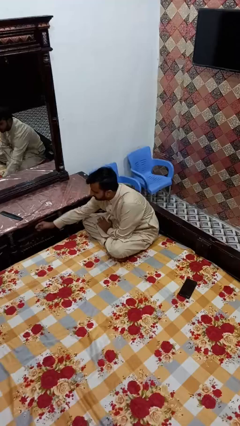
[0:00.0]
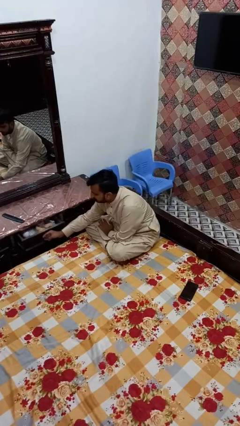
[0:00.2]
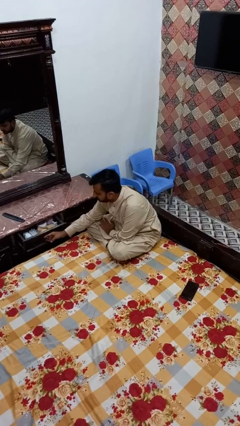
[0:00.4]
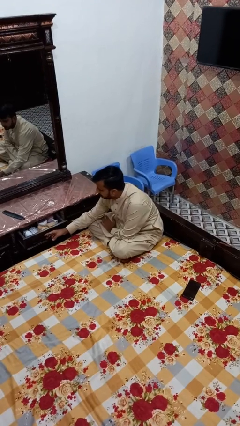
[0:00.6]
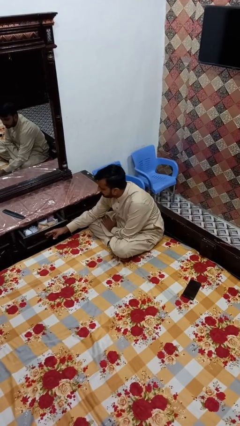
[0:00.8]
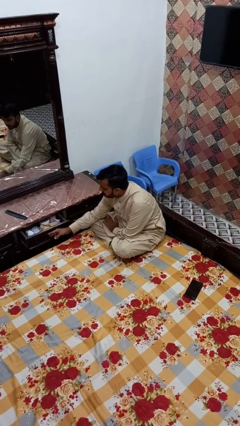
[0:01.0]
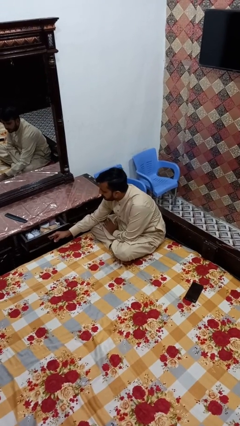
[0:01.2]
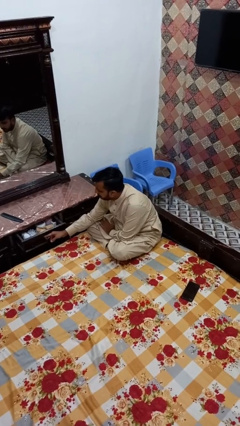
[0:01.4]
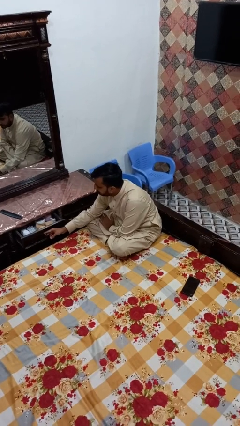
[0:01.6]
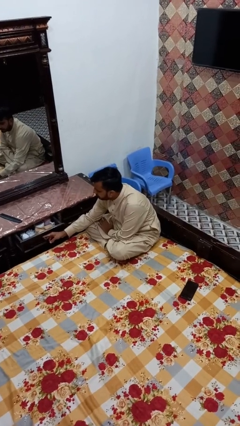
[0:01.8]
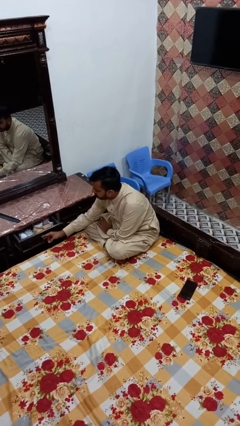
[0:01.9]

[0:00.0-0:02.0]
person opens dresser drawer

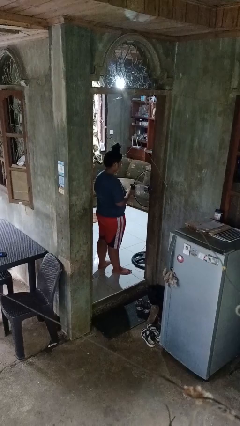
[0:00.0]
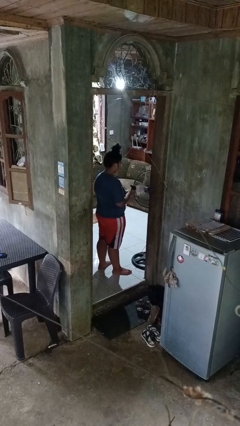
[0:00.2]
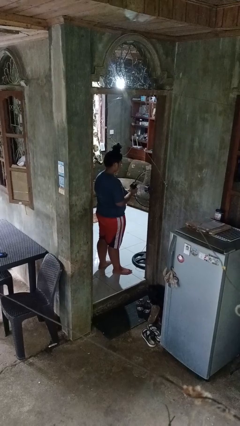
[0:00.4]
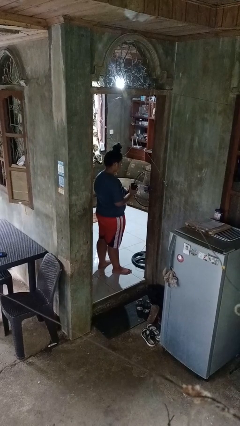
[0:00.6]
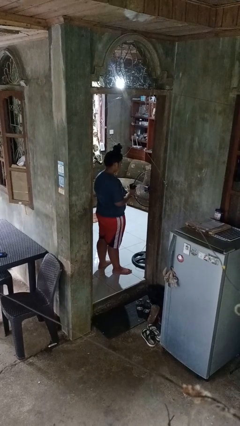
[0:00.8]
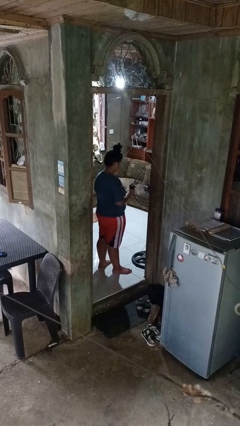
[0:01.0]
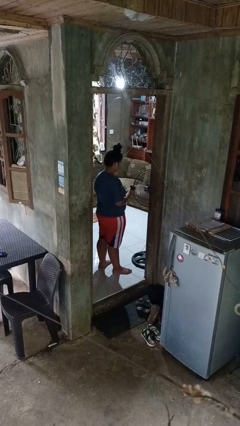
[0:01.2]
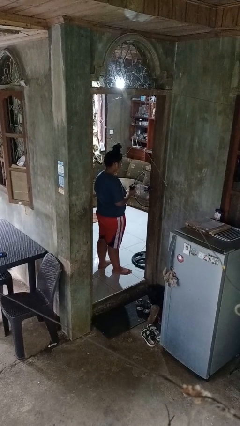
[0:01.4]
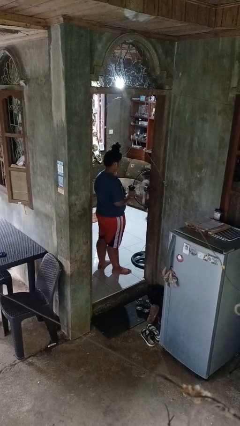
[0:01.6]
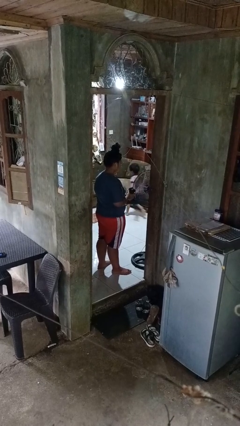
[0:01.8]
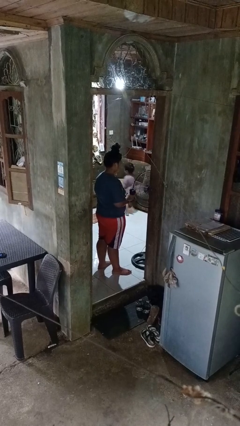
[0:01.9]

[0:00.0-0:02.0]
person squeezes object

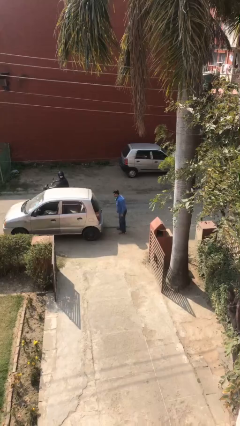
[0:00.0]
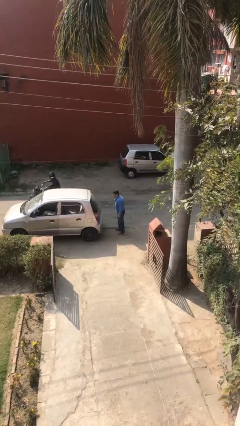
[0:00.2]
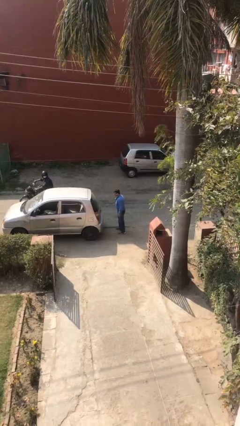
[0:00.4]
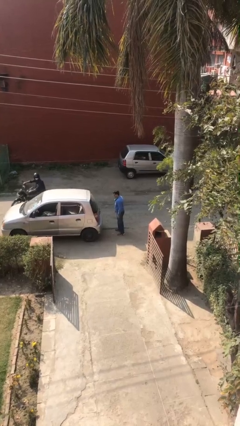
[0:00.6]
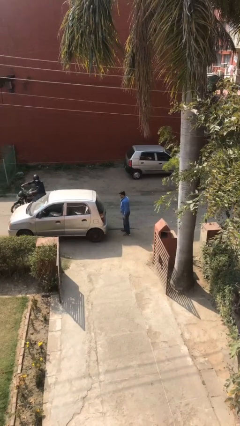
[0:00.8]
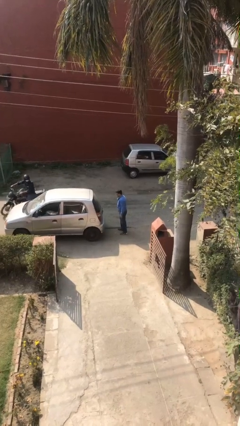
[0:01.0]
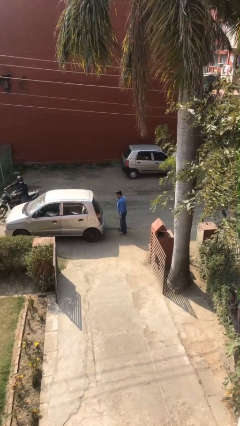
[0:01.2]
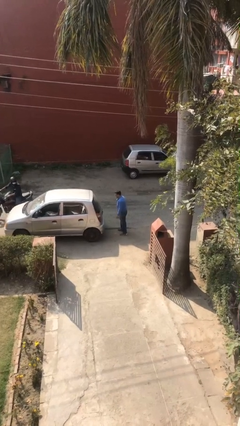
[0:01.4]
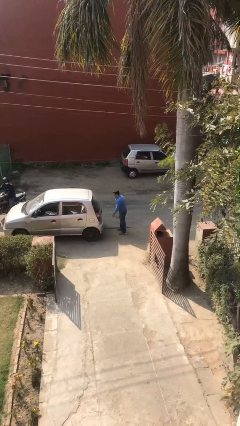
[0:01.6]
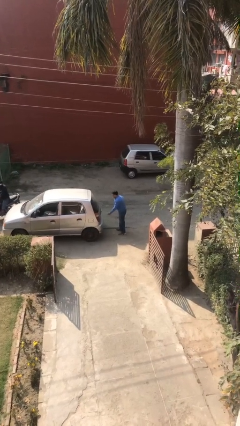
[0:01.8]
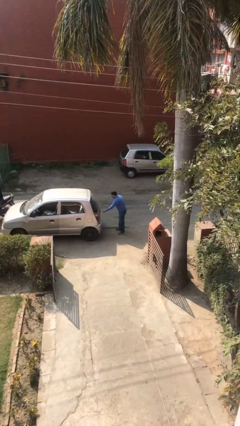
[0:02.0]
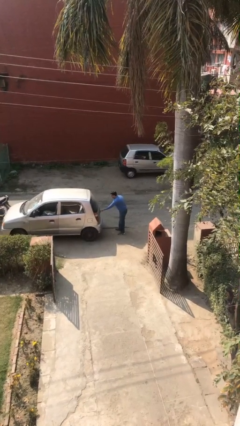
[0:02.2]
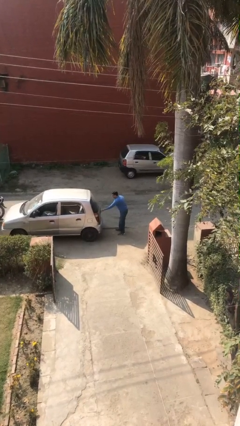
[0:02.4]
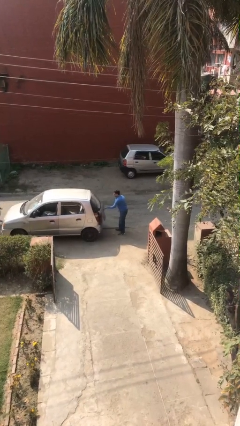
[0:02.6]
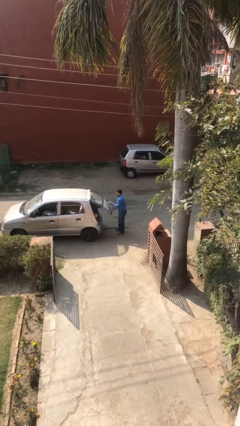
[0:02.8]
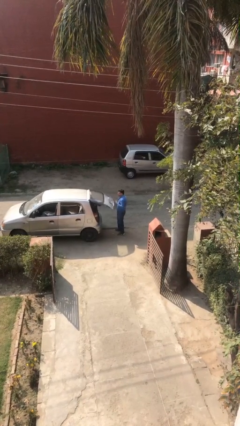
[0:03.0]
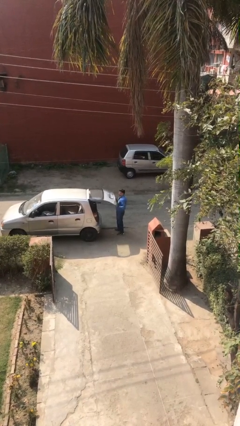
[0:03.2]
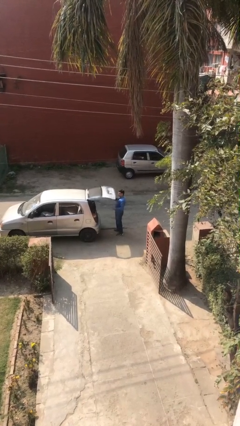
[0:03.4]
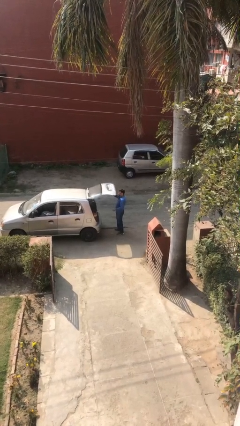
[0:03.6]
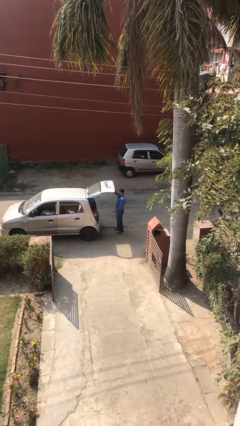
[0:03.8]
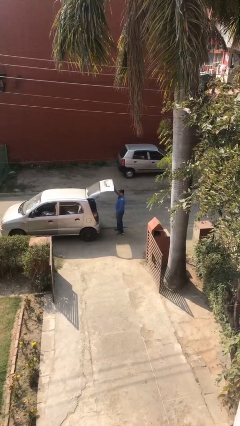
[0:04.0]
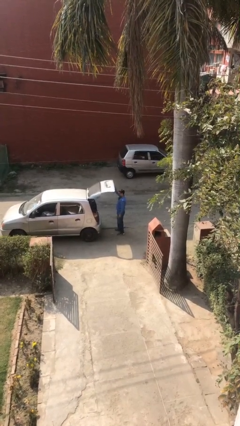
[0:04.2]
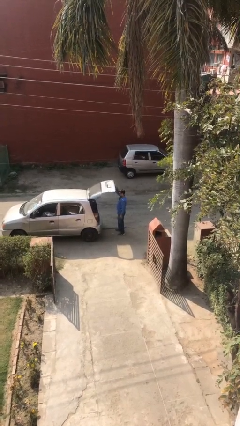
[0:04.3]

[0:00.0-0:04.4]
person opens car trunk

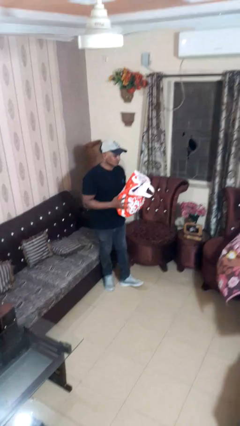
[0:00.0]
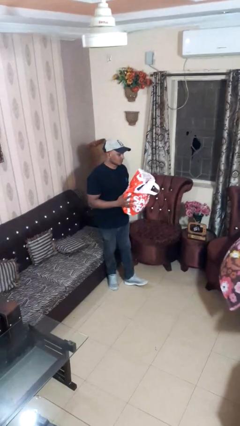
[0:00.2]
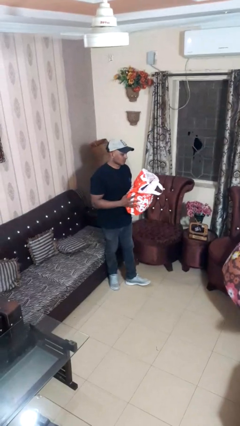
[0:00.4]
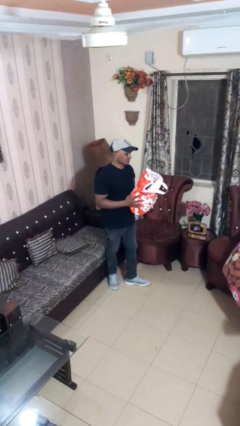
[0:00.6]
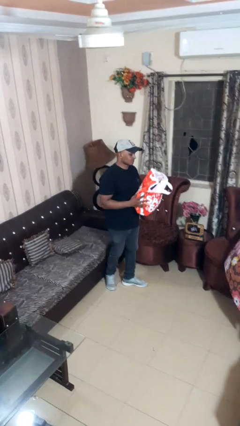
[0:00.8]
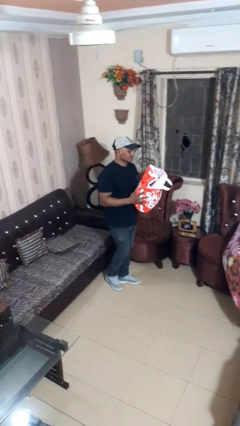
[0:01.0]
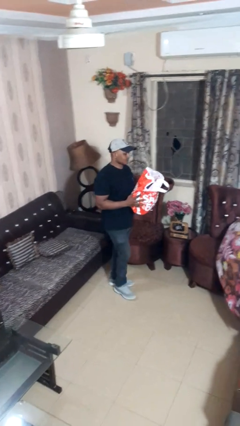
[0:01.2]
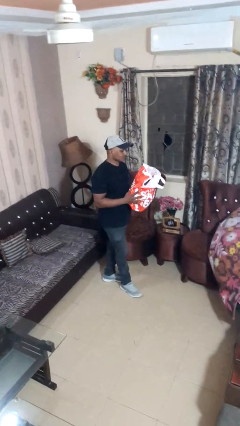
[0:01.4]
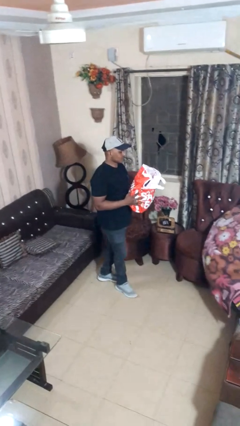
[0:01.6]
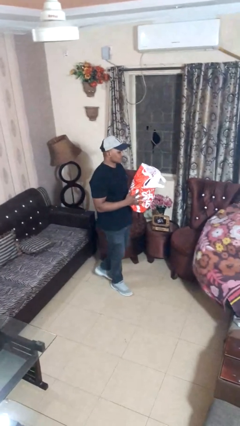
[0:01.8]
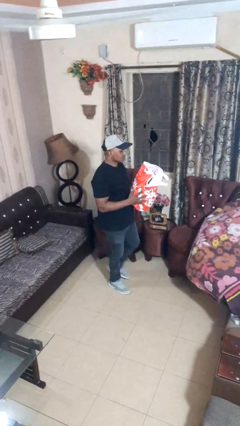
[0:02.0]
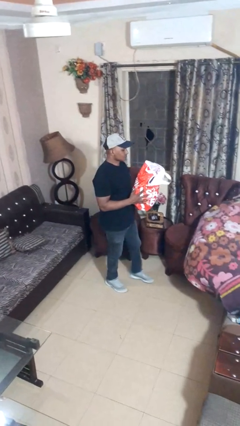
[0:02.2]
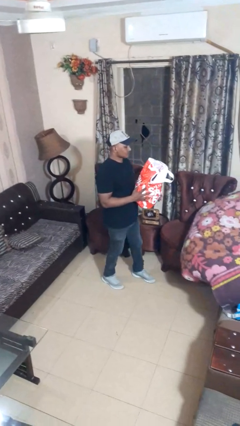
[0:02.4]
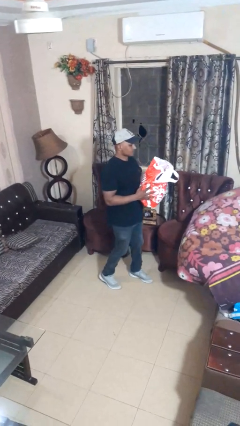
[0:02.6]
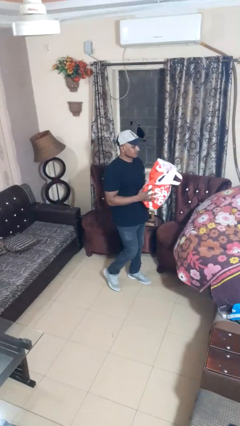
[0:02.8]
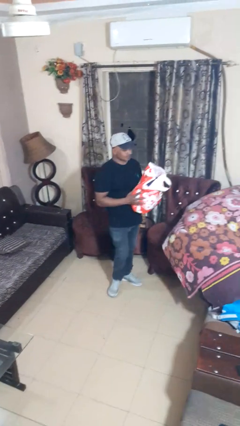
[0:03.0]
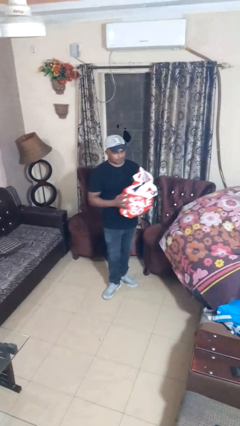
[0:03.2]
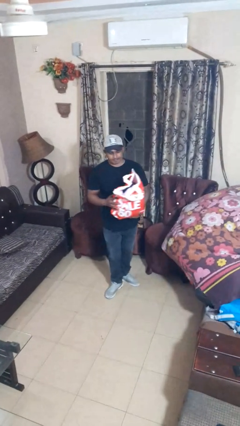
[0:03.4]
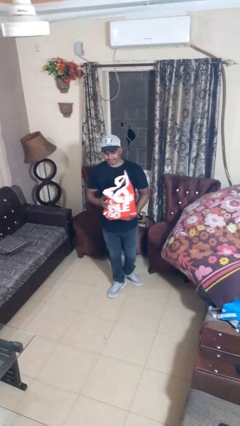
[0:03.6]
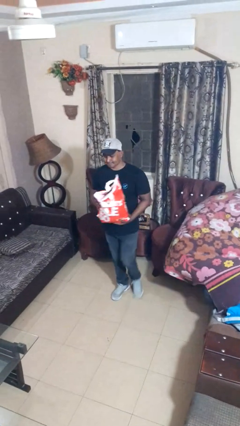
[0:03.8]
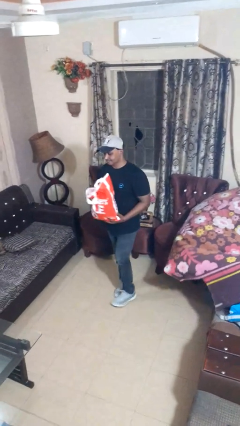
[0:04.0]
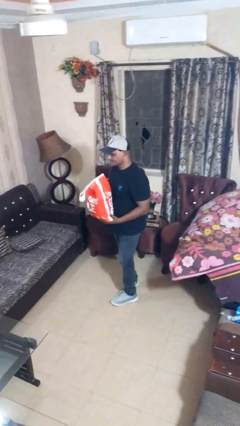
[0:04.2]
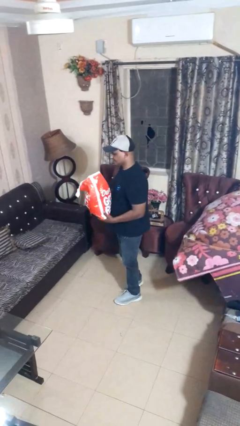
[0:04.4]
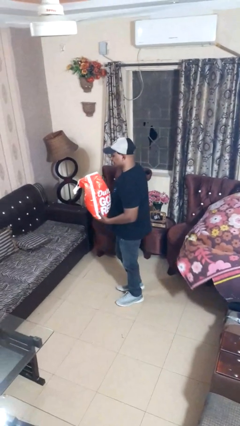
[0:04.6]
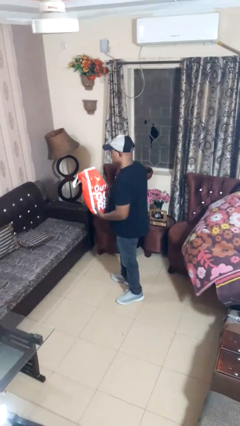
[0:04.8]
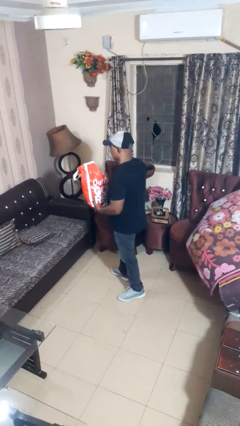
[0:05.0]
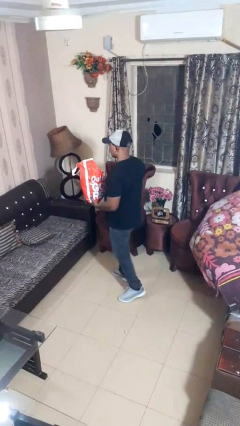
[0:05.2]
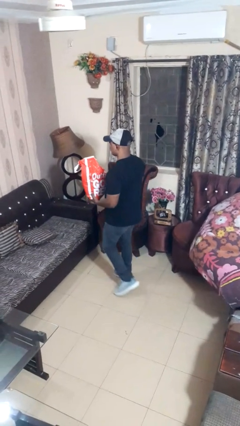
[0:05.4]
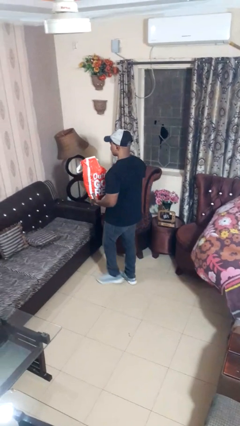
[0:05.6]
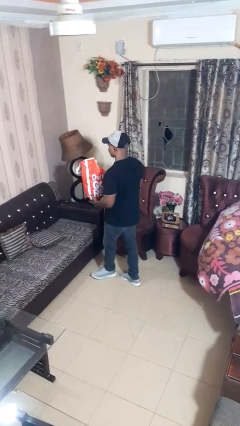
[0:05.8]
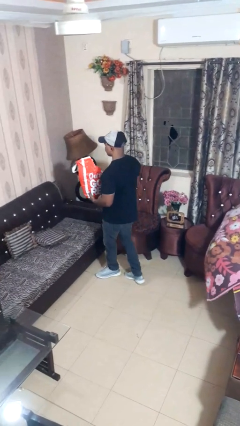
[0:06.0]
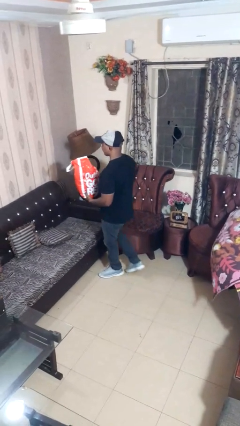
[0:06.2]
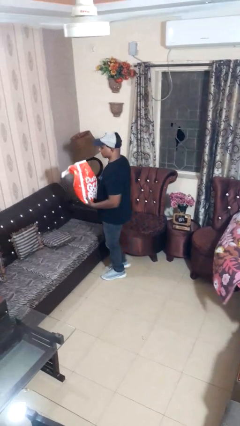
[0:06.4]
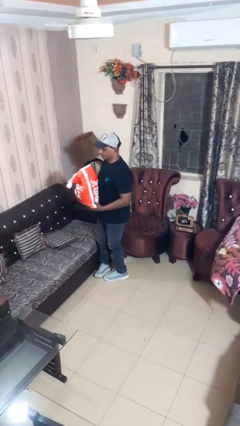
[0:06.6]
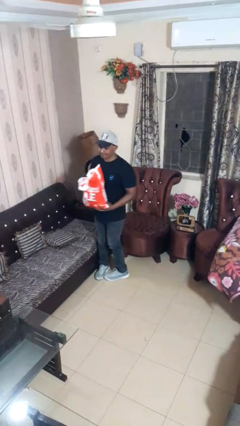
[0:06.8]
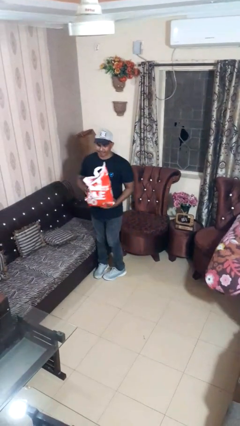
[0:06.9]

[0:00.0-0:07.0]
person carries groceries

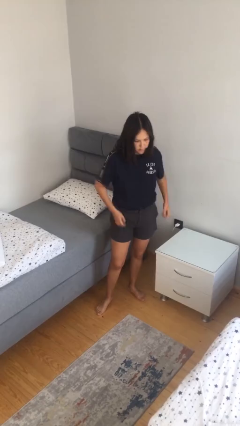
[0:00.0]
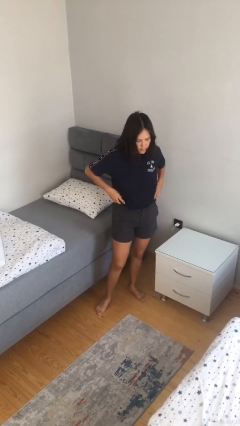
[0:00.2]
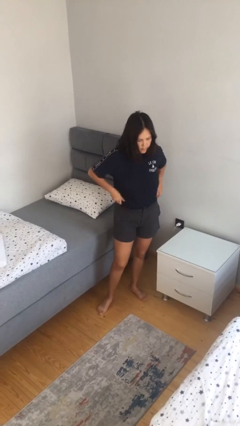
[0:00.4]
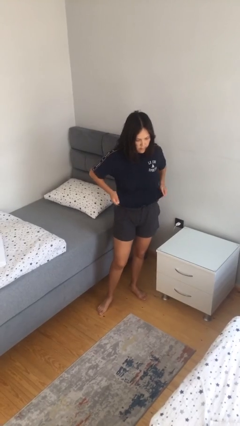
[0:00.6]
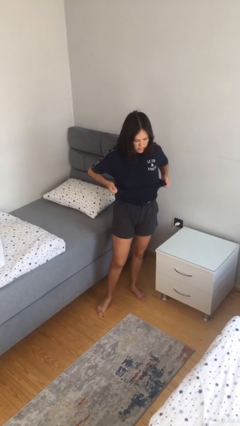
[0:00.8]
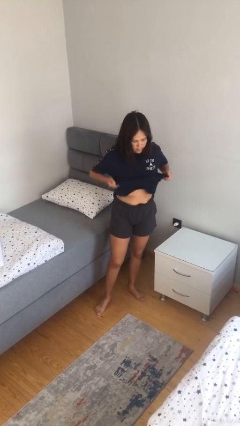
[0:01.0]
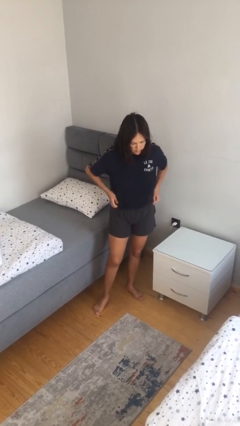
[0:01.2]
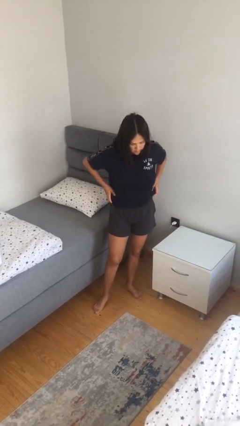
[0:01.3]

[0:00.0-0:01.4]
person untucks shirt

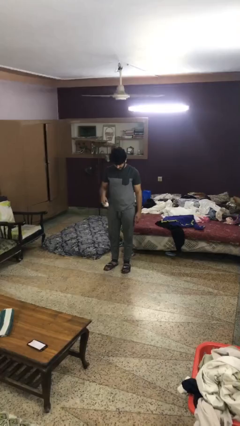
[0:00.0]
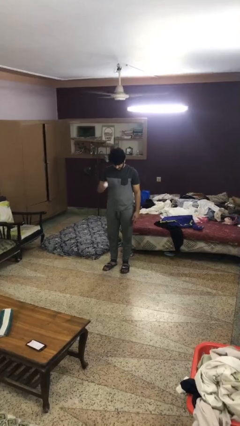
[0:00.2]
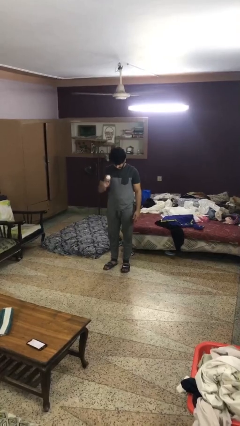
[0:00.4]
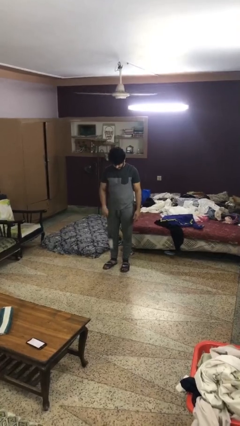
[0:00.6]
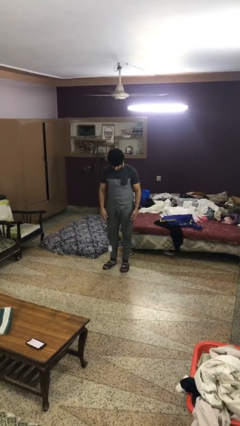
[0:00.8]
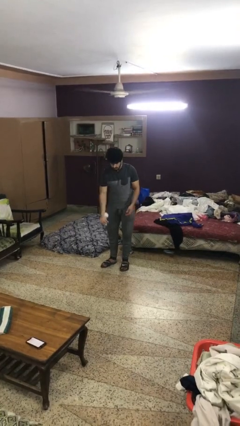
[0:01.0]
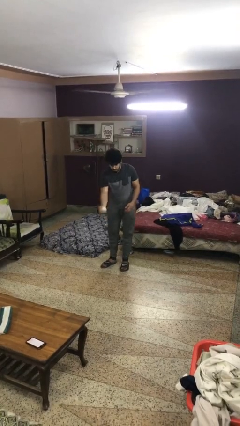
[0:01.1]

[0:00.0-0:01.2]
person bounces ball on floor
